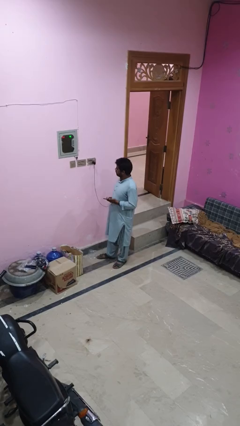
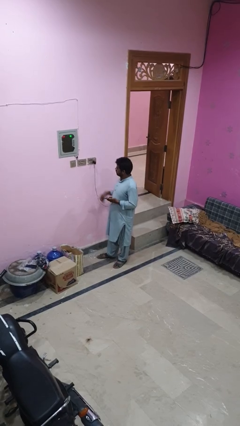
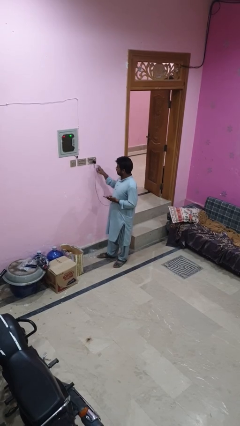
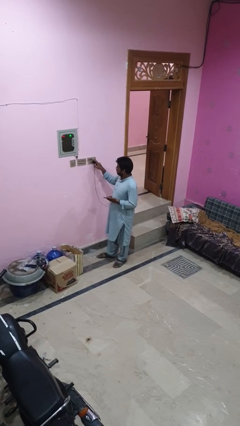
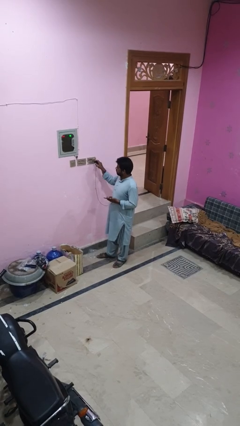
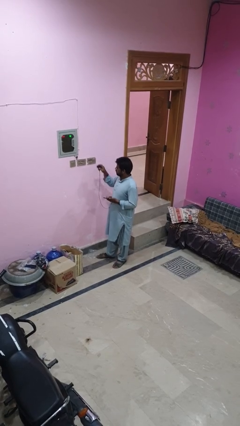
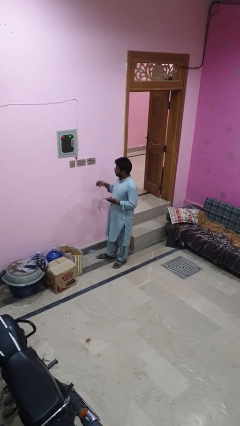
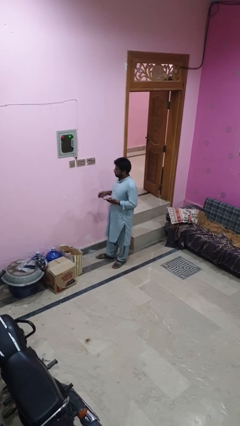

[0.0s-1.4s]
person unplugs from electrical socket

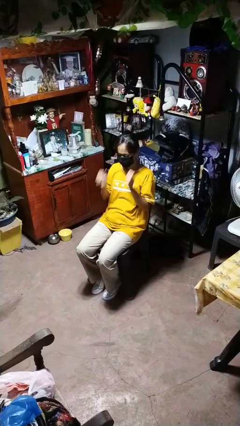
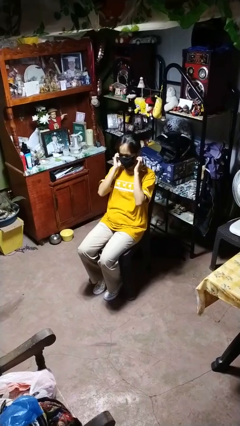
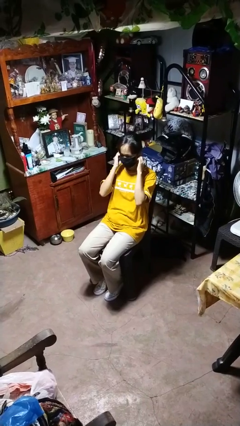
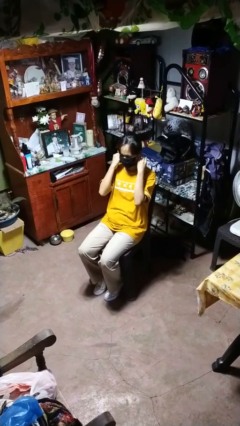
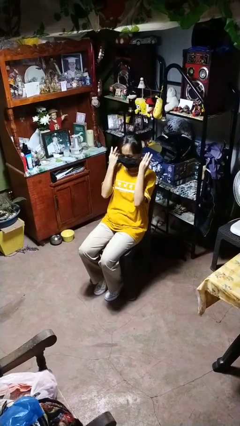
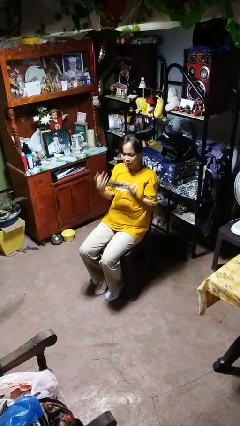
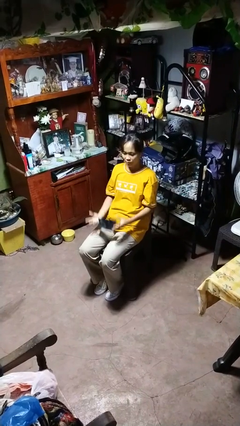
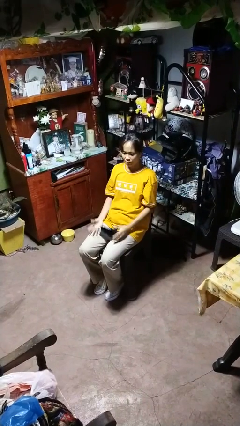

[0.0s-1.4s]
person takes off facemask

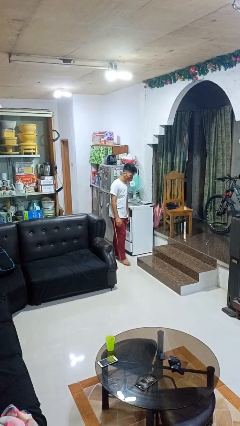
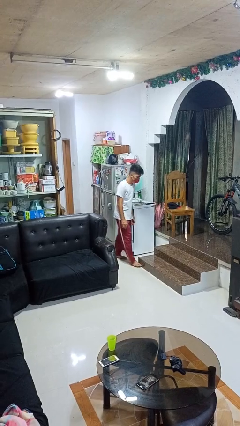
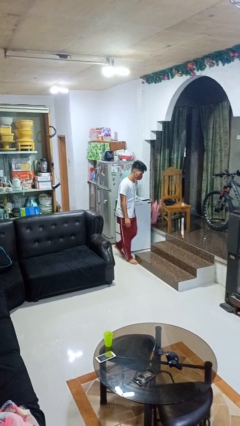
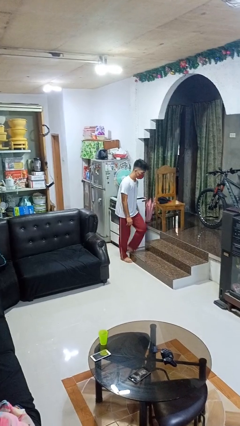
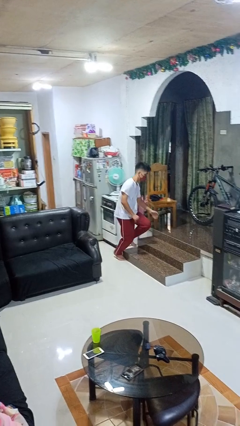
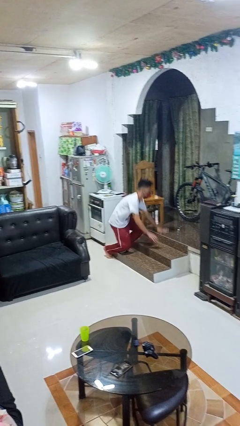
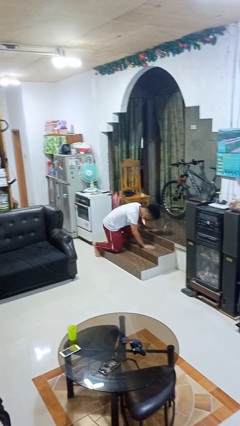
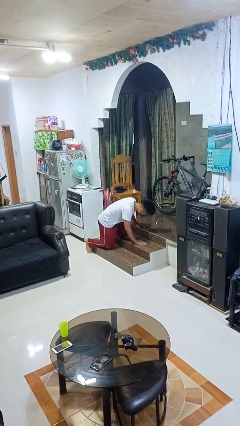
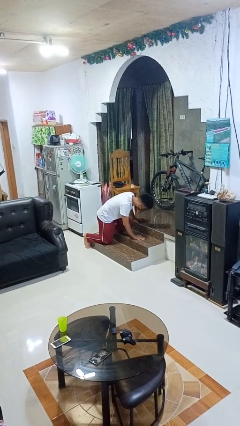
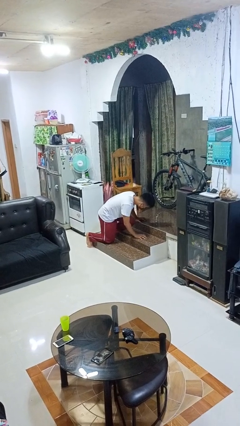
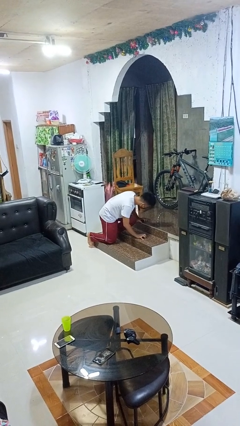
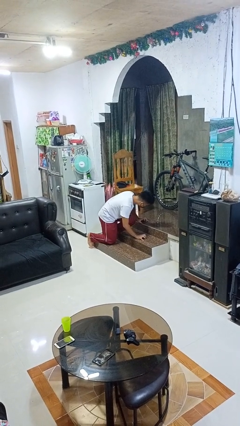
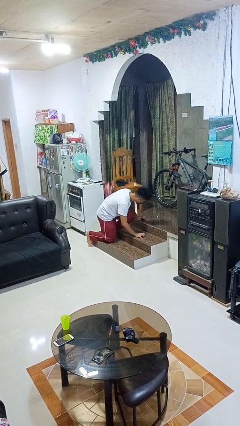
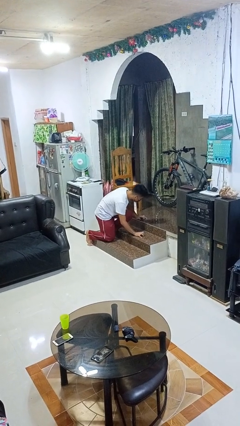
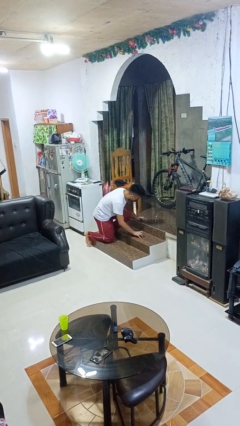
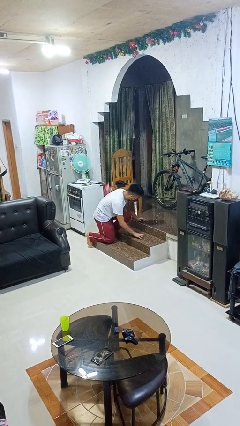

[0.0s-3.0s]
person trips on object on floor

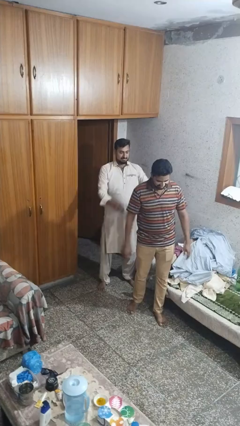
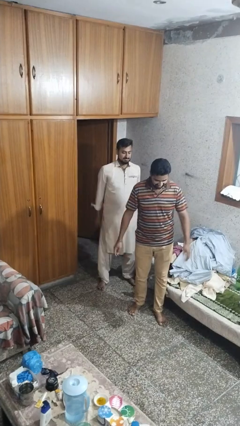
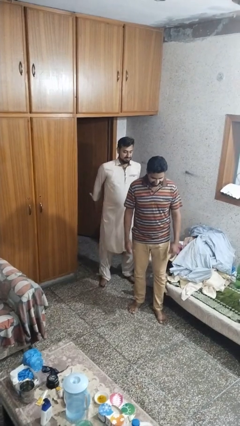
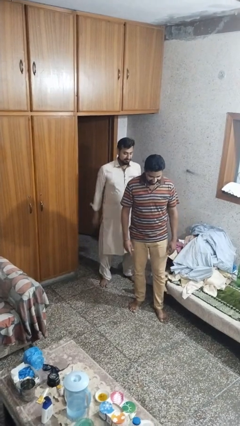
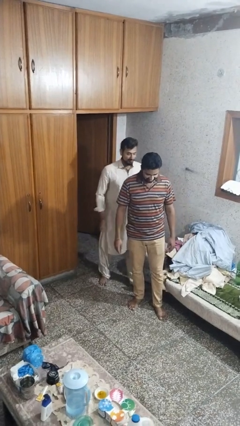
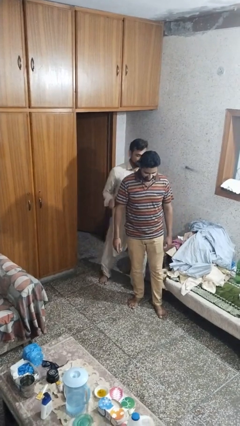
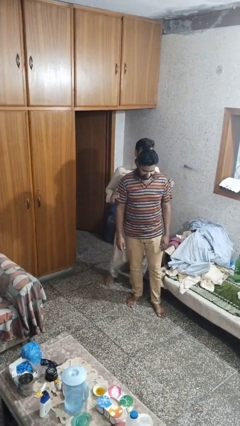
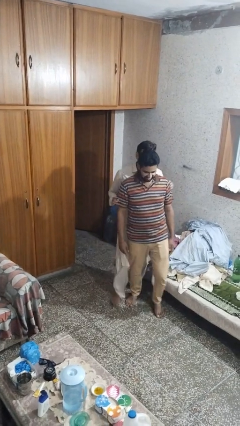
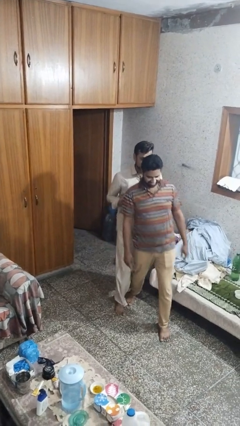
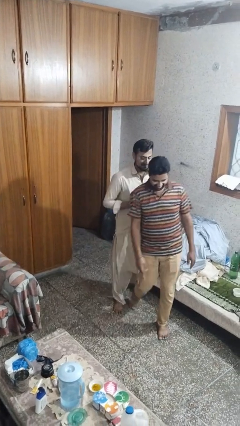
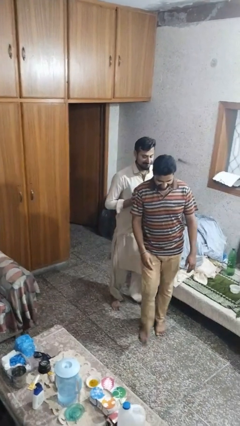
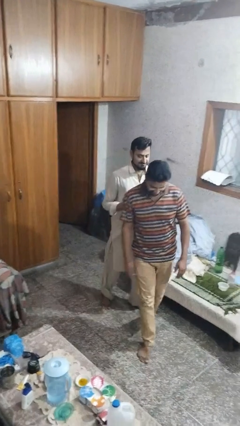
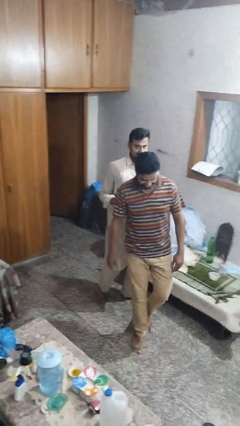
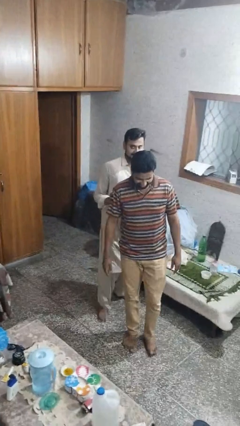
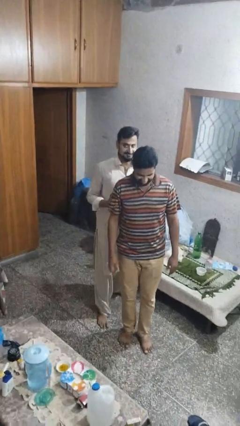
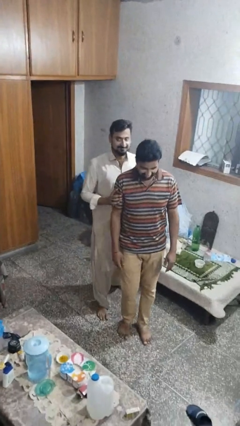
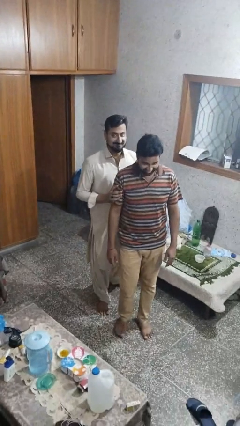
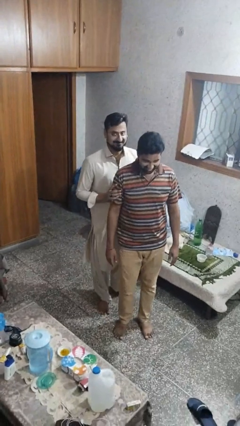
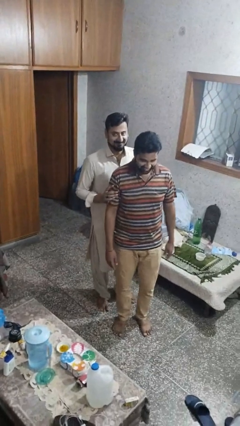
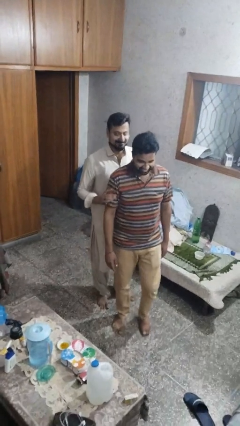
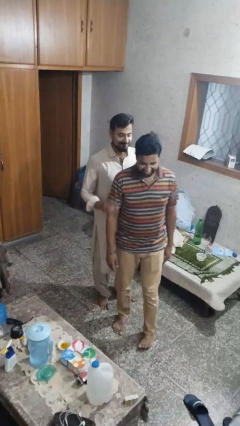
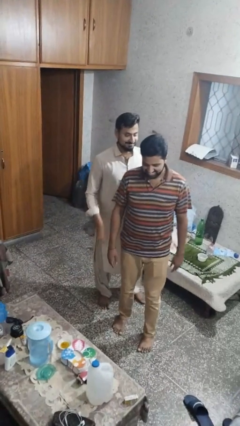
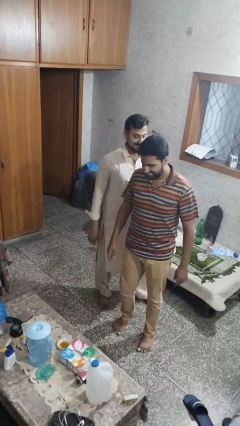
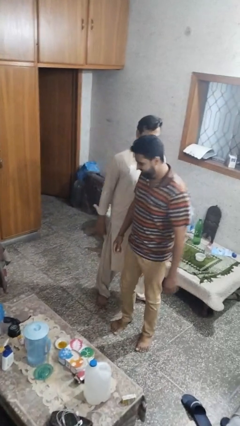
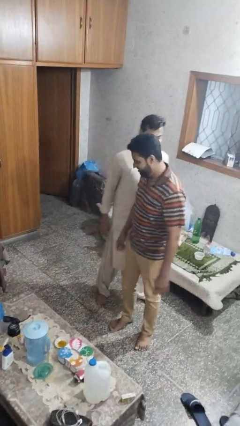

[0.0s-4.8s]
person bumps into person

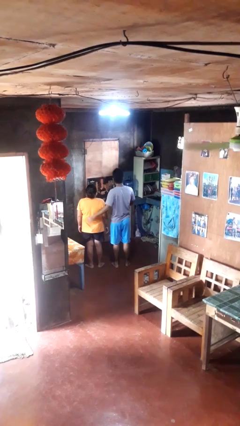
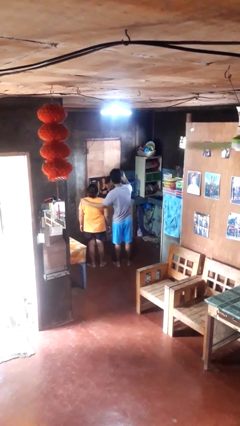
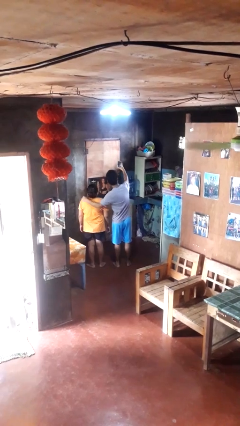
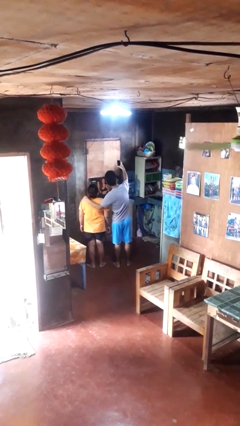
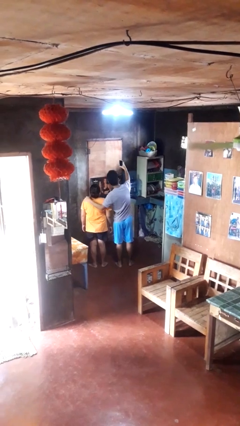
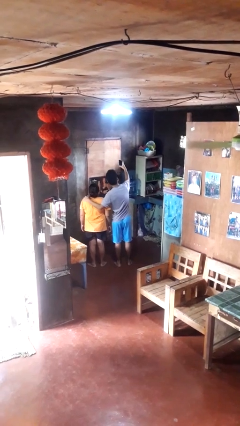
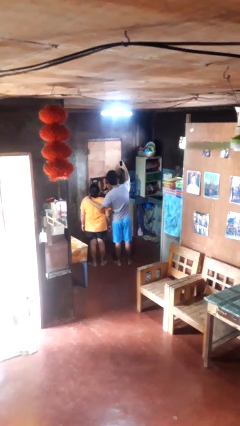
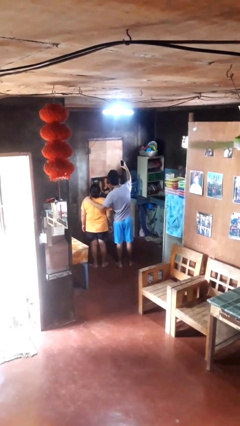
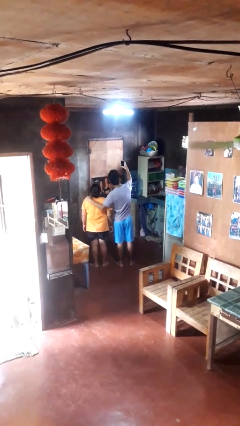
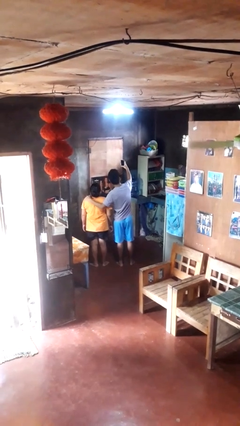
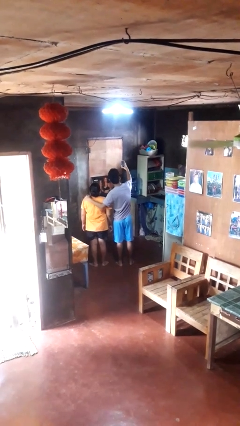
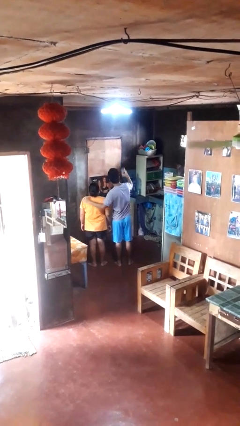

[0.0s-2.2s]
person takes selfie with person

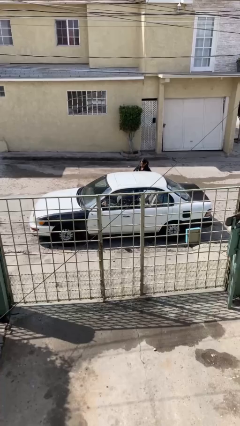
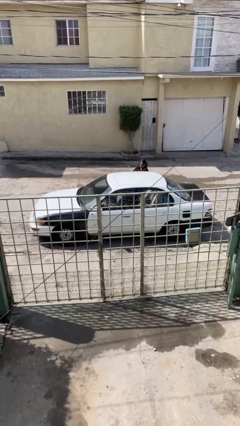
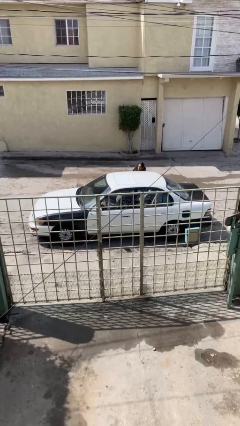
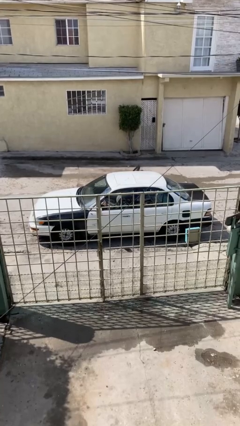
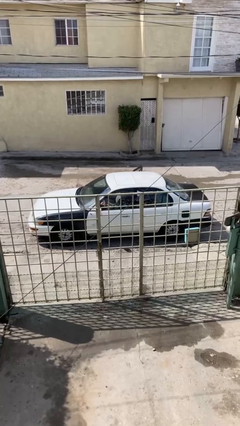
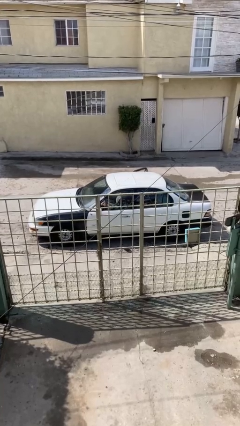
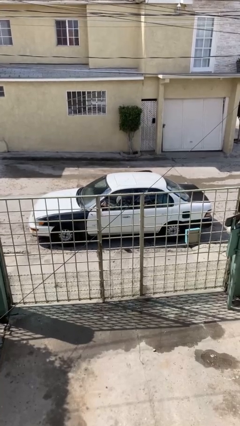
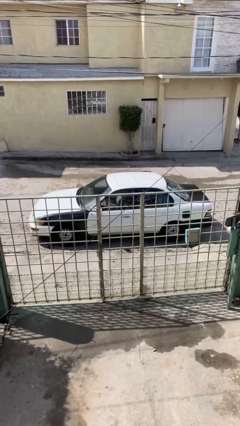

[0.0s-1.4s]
car picks up person

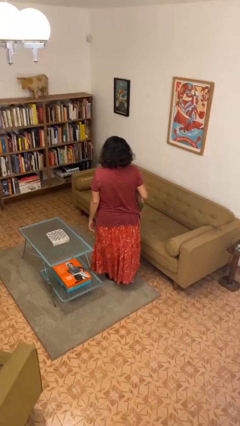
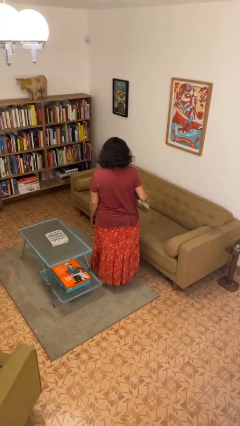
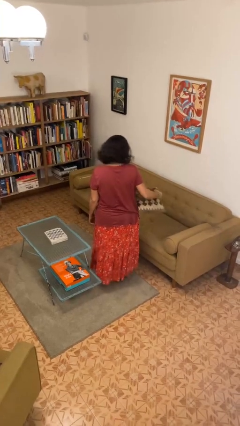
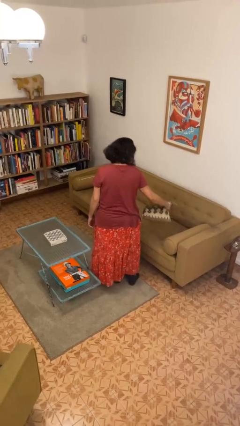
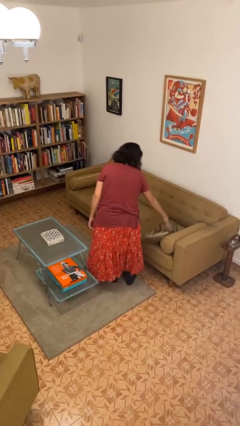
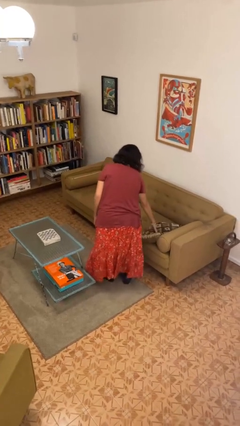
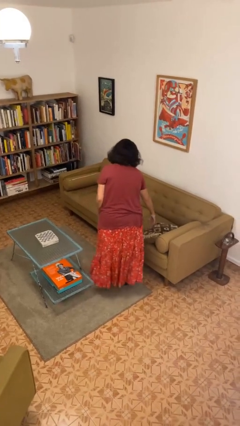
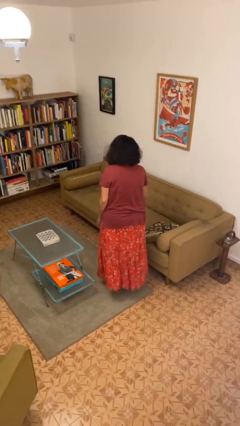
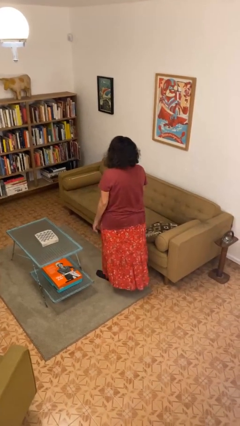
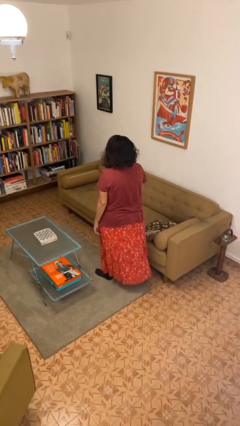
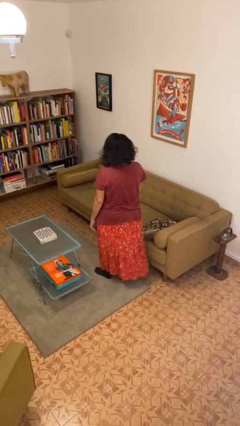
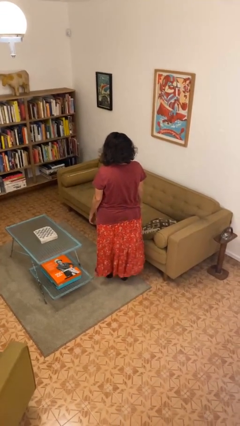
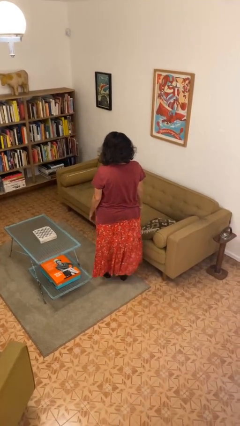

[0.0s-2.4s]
person puts down object on couch
